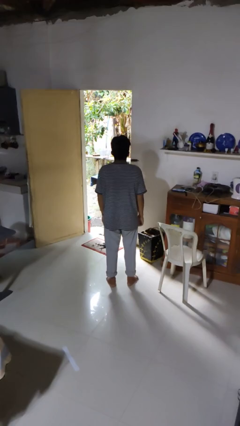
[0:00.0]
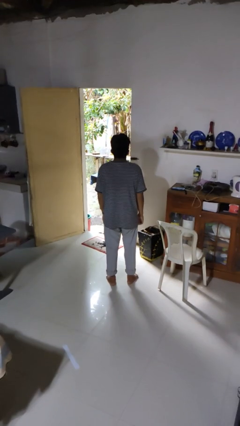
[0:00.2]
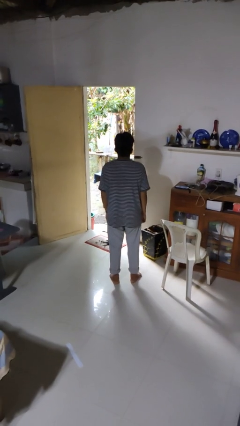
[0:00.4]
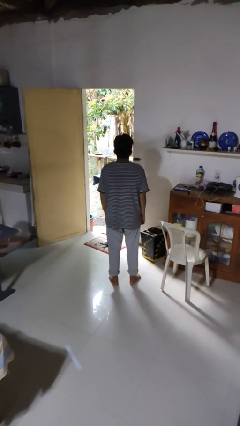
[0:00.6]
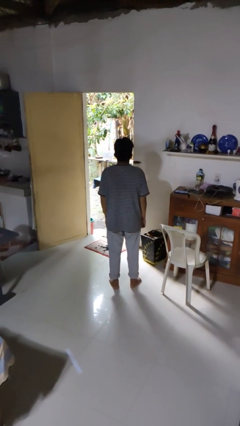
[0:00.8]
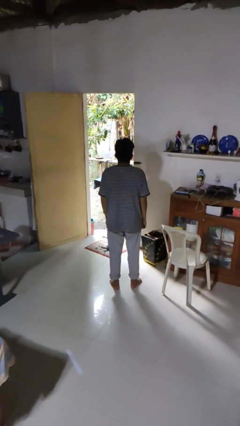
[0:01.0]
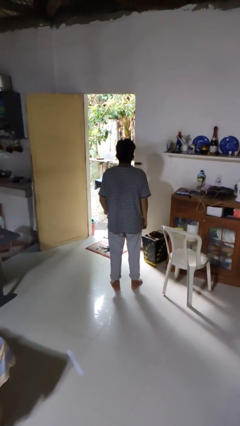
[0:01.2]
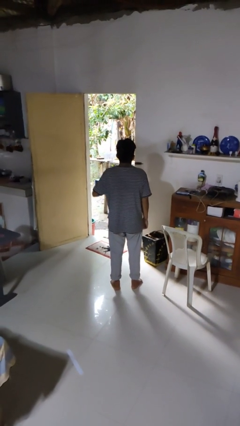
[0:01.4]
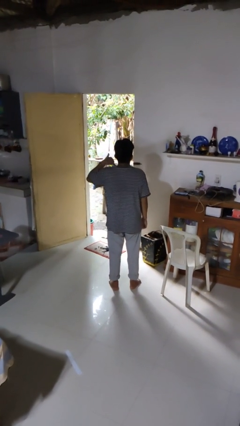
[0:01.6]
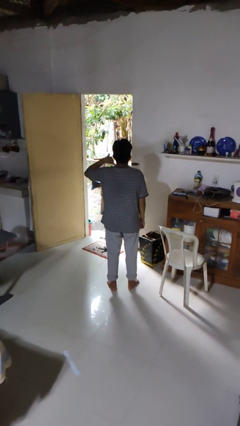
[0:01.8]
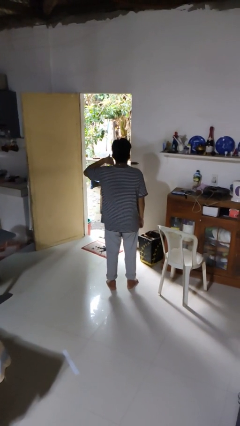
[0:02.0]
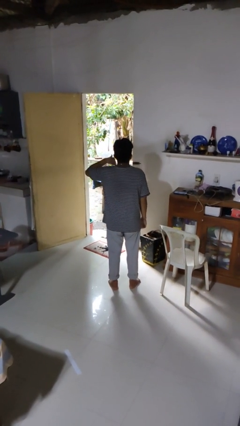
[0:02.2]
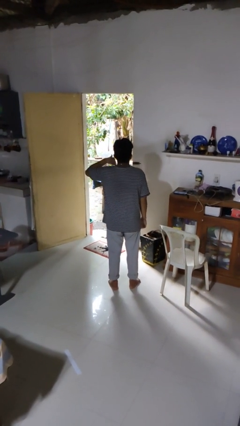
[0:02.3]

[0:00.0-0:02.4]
person gestures call me

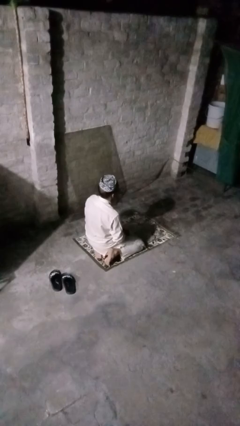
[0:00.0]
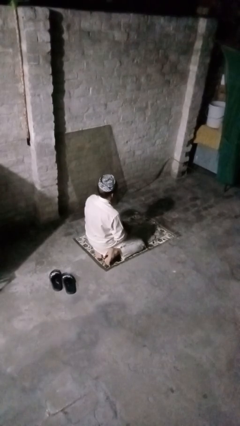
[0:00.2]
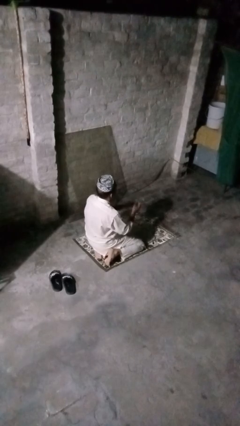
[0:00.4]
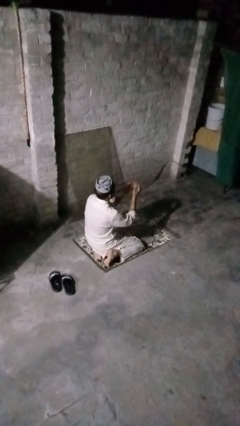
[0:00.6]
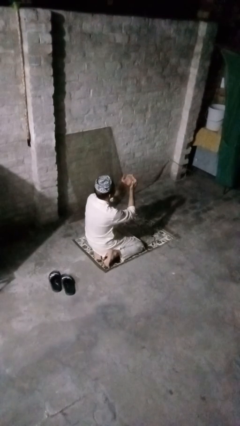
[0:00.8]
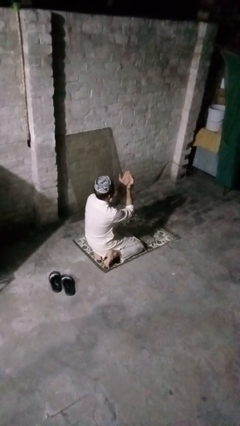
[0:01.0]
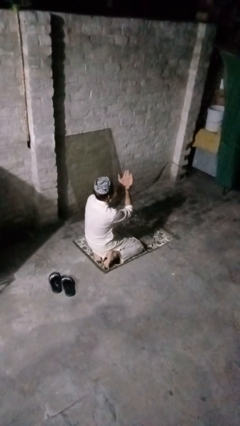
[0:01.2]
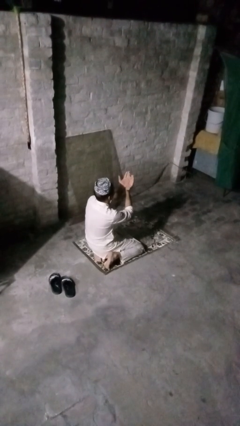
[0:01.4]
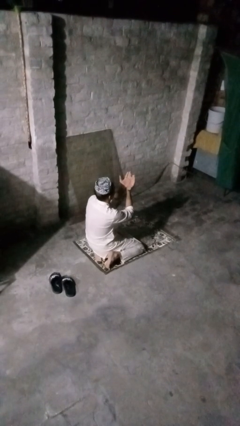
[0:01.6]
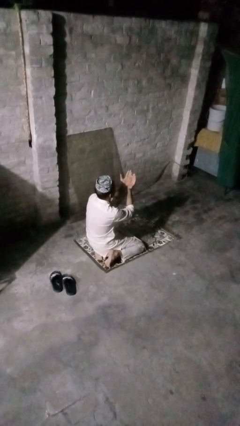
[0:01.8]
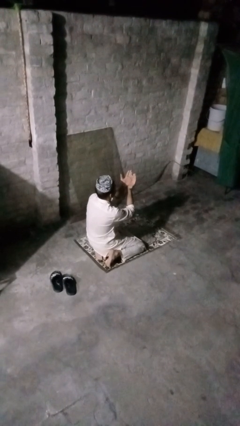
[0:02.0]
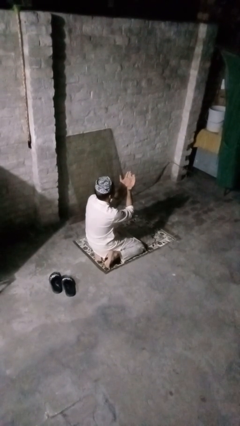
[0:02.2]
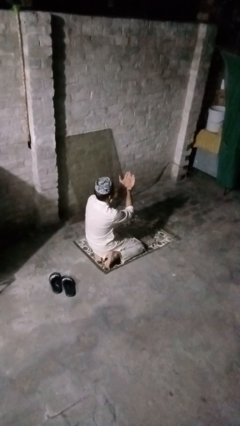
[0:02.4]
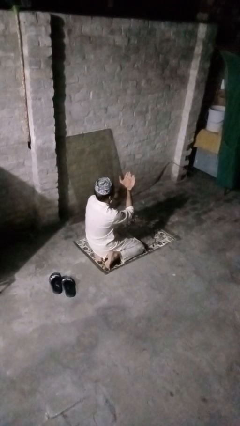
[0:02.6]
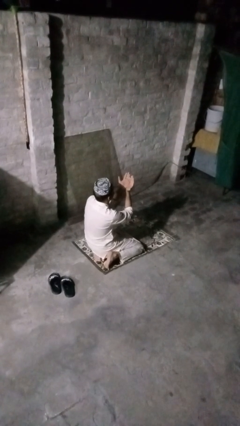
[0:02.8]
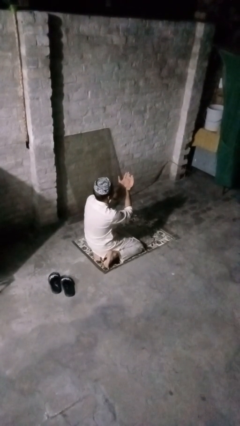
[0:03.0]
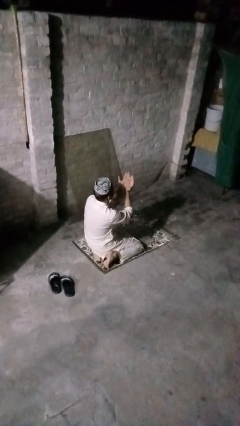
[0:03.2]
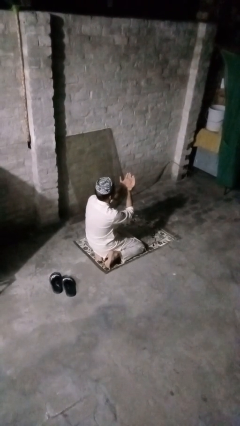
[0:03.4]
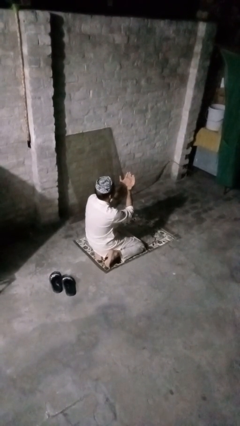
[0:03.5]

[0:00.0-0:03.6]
person prays

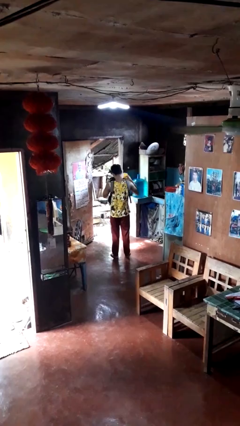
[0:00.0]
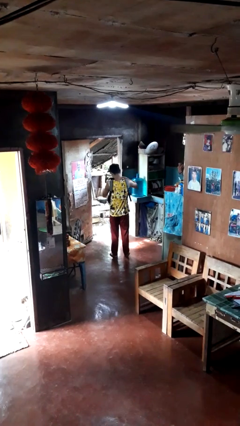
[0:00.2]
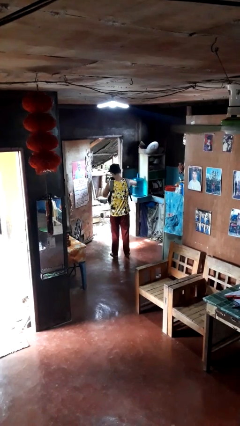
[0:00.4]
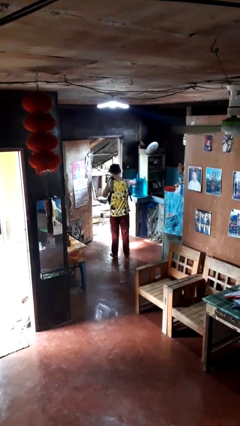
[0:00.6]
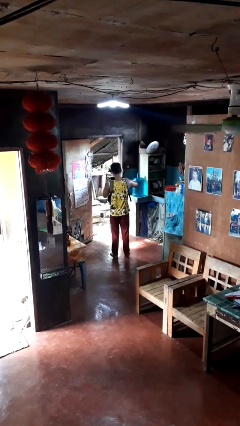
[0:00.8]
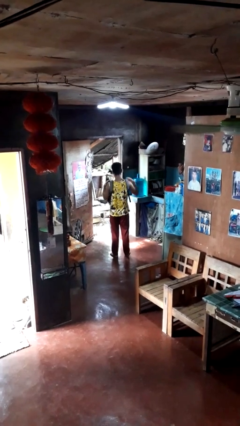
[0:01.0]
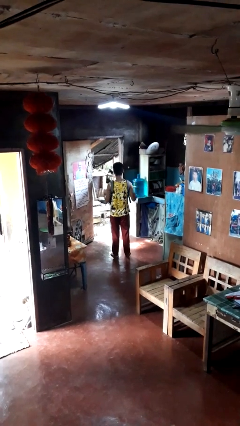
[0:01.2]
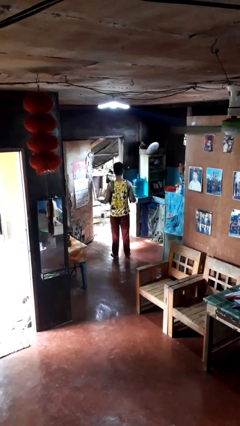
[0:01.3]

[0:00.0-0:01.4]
person puts object into backpack

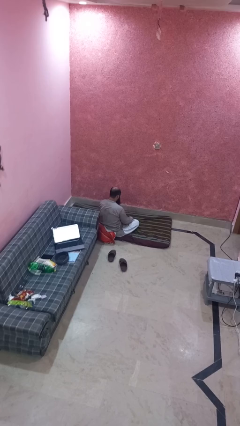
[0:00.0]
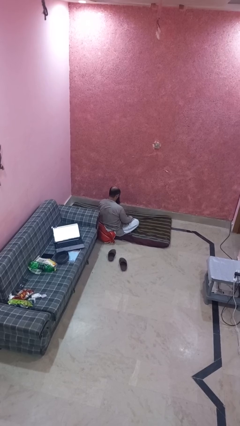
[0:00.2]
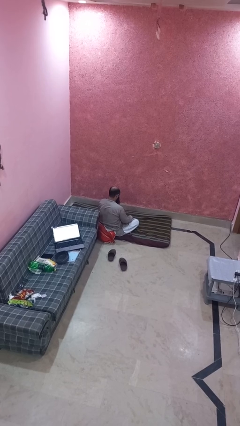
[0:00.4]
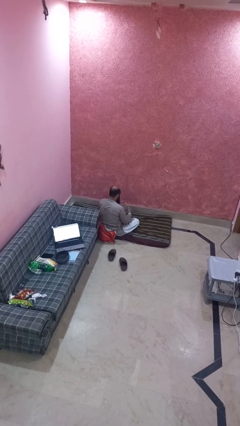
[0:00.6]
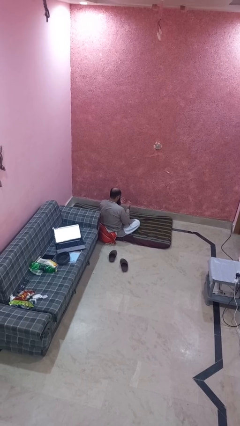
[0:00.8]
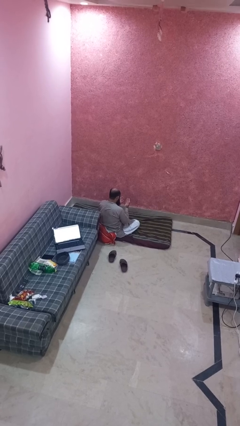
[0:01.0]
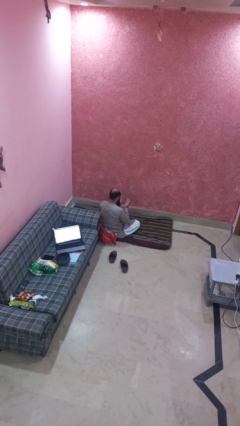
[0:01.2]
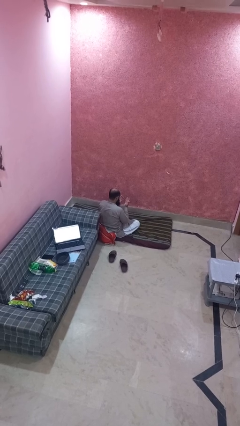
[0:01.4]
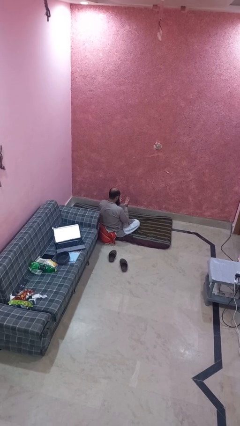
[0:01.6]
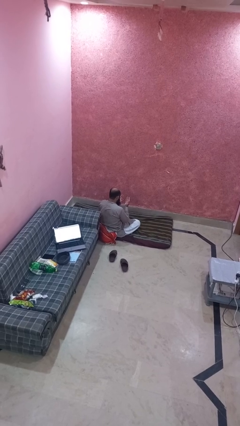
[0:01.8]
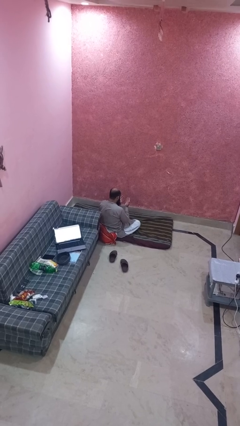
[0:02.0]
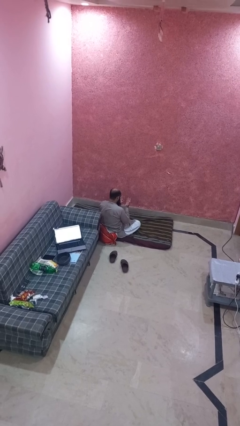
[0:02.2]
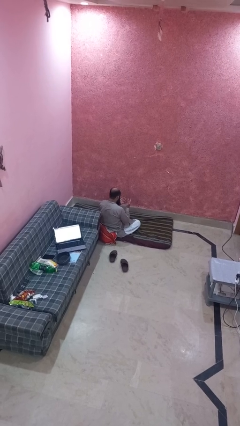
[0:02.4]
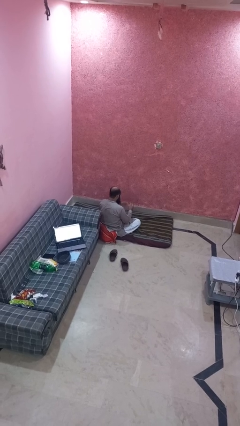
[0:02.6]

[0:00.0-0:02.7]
person looks at hands in lap

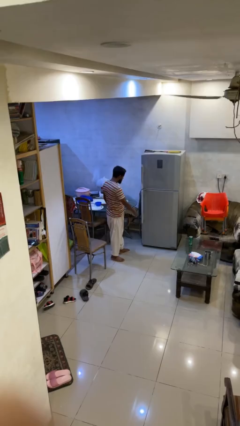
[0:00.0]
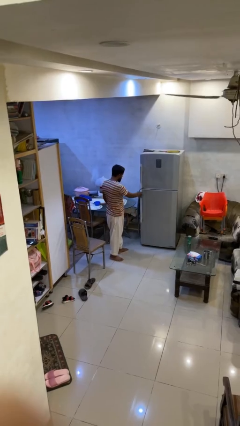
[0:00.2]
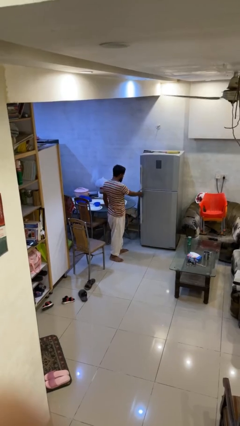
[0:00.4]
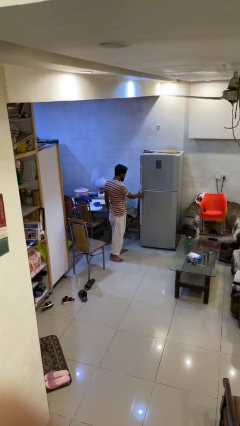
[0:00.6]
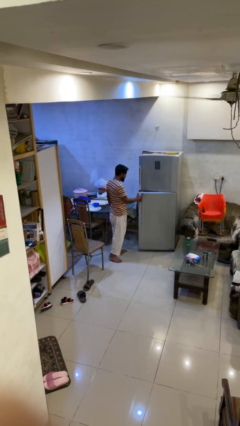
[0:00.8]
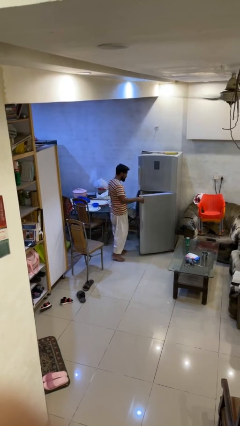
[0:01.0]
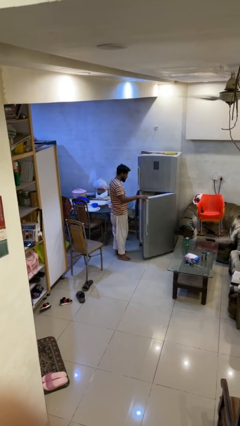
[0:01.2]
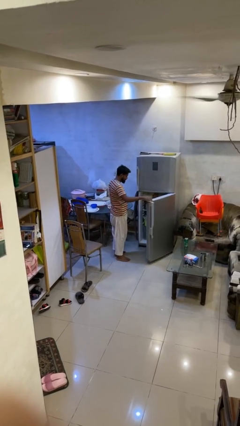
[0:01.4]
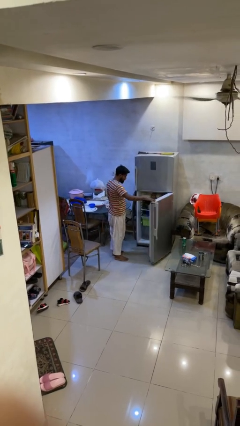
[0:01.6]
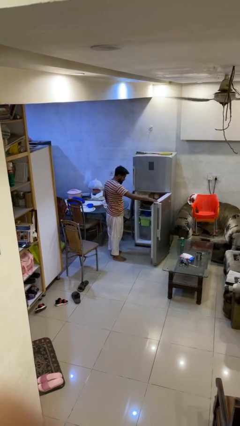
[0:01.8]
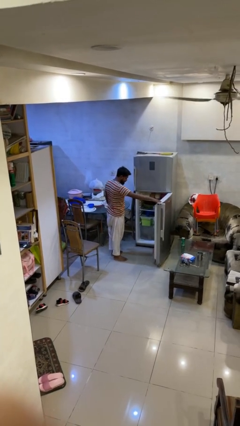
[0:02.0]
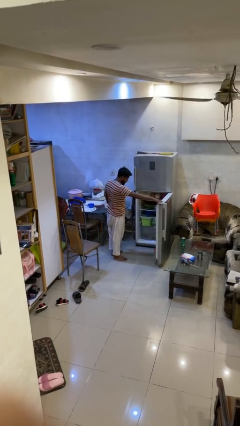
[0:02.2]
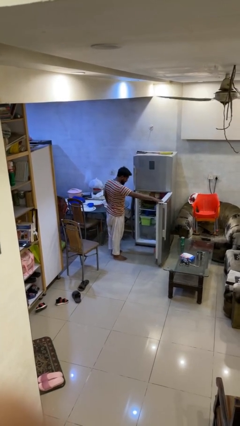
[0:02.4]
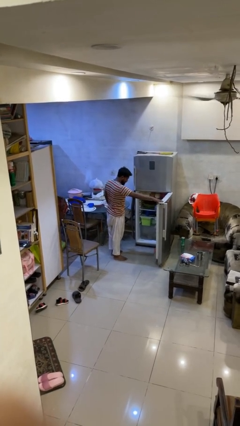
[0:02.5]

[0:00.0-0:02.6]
person opens refrigerator

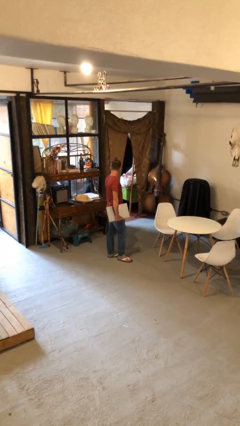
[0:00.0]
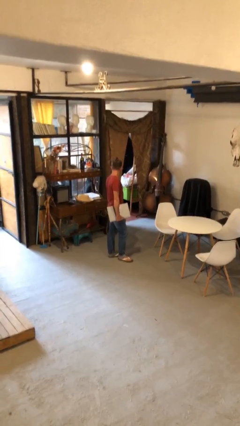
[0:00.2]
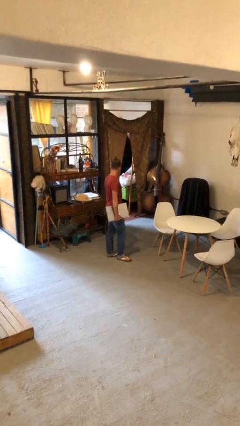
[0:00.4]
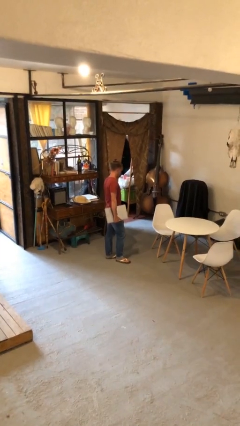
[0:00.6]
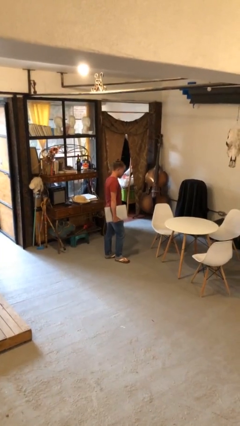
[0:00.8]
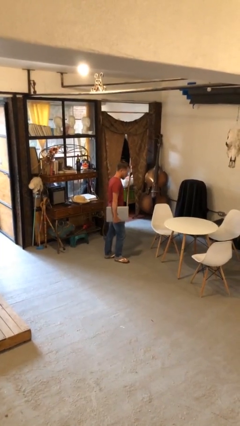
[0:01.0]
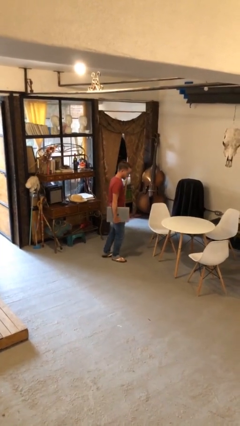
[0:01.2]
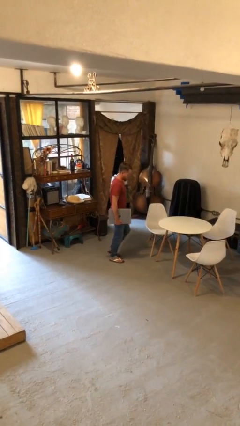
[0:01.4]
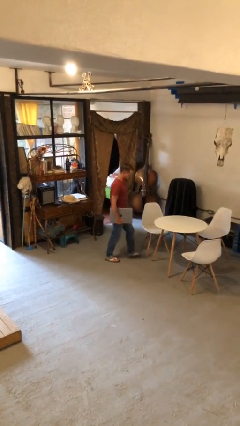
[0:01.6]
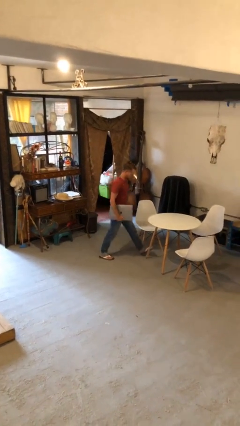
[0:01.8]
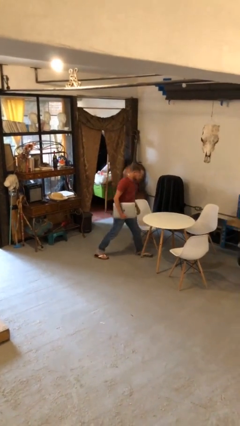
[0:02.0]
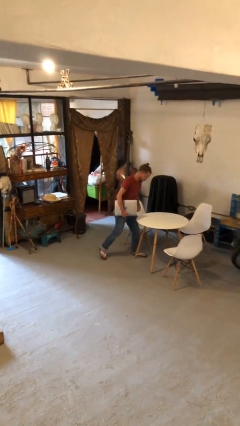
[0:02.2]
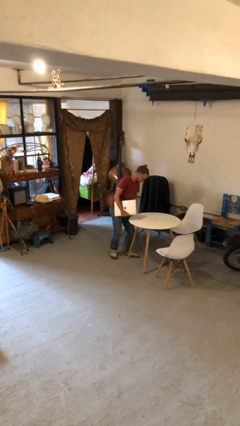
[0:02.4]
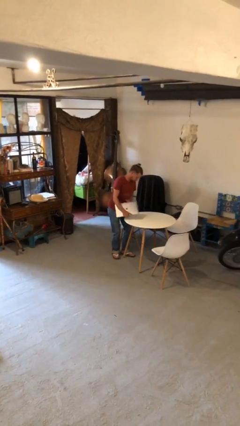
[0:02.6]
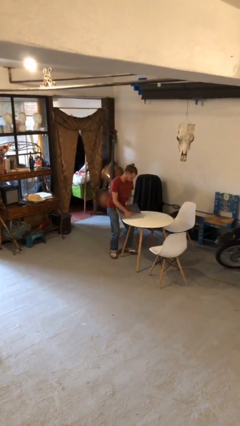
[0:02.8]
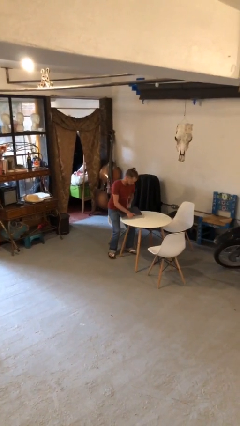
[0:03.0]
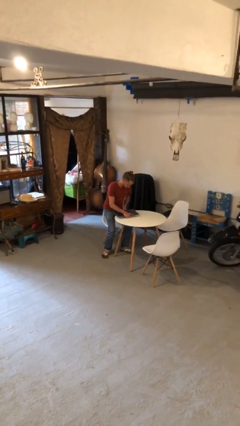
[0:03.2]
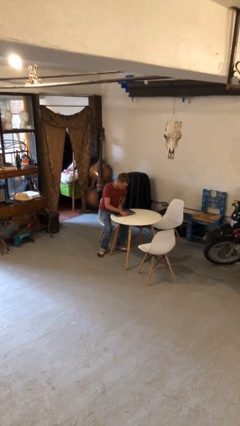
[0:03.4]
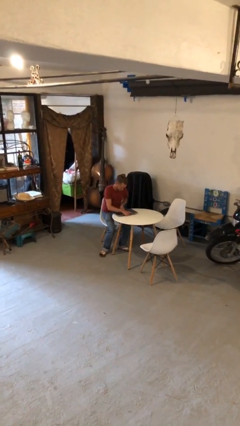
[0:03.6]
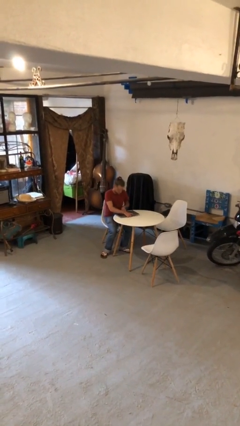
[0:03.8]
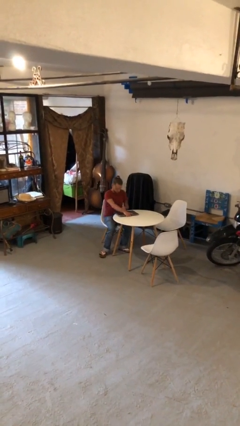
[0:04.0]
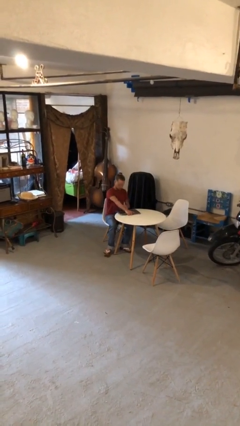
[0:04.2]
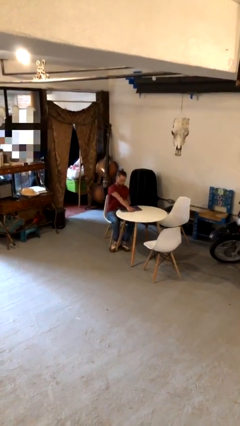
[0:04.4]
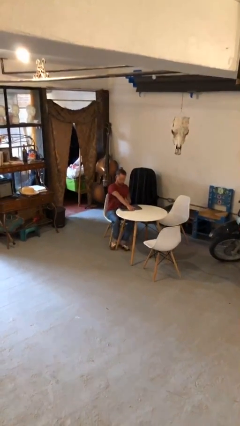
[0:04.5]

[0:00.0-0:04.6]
person sits down

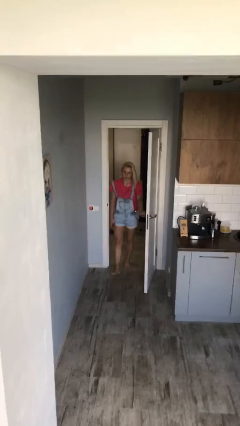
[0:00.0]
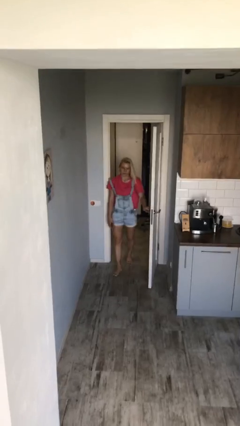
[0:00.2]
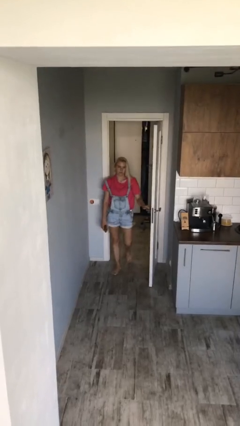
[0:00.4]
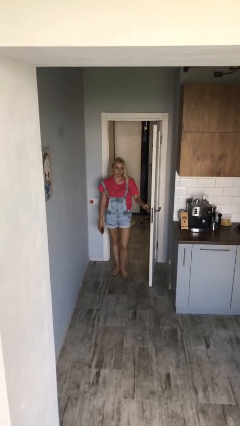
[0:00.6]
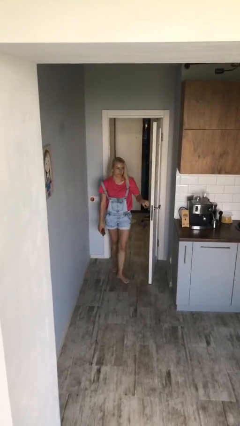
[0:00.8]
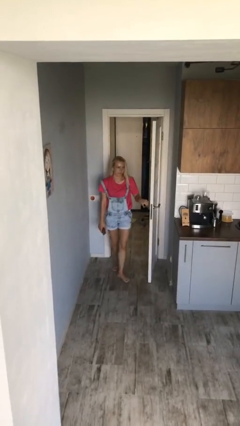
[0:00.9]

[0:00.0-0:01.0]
person enters scene through structure
